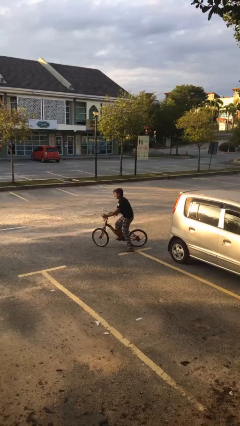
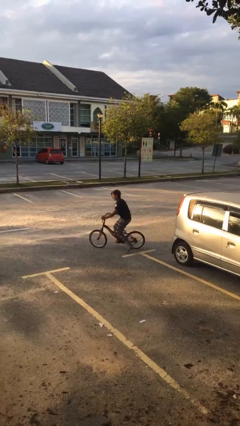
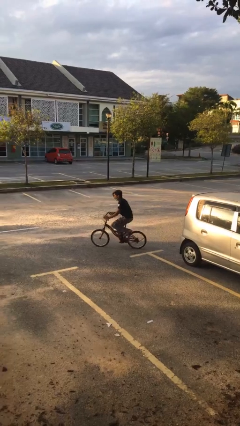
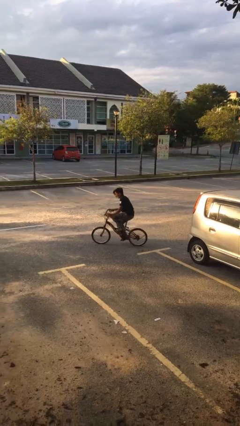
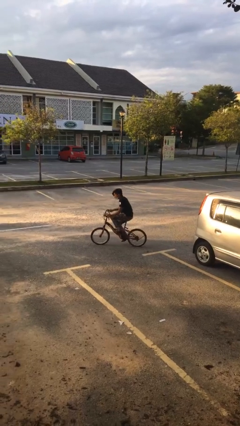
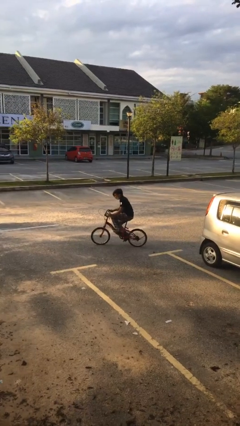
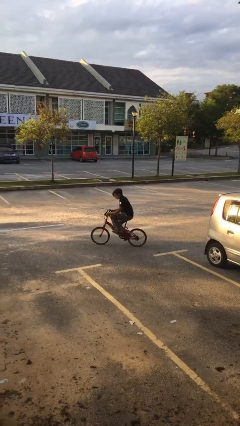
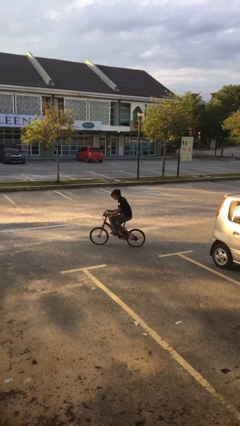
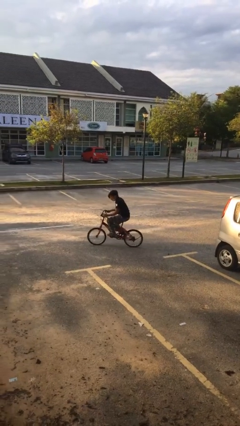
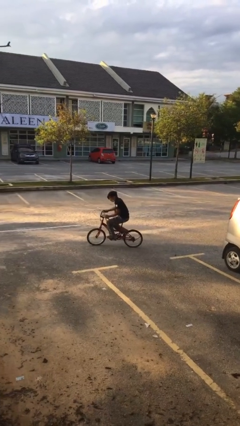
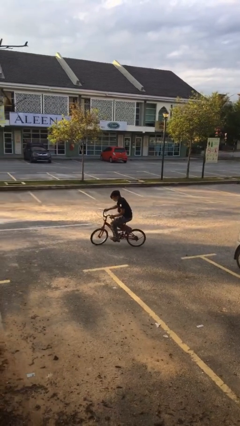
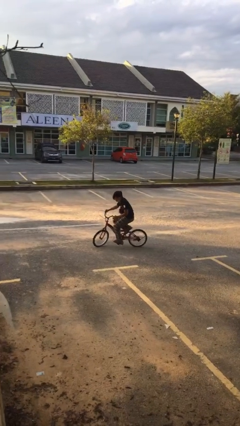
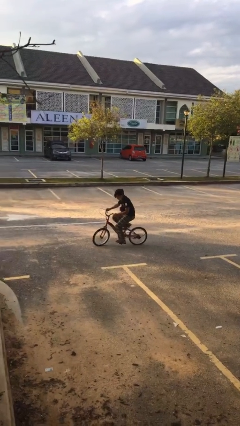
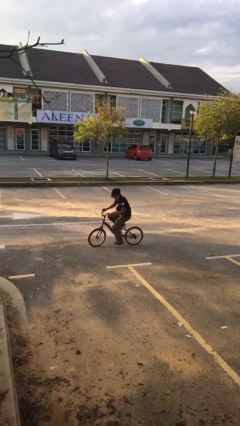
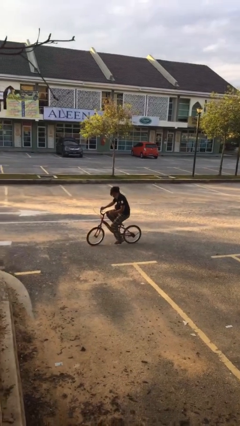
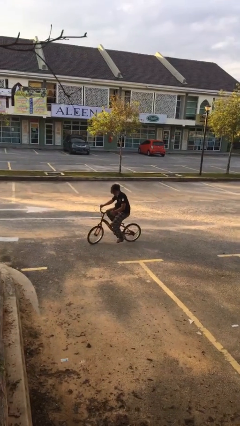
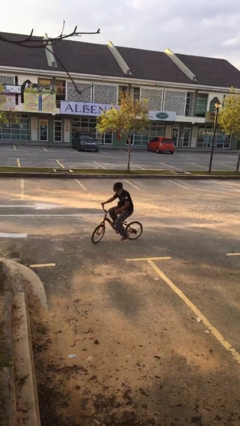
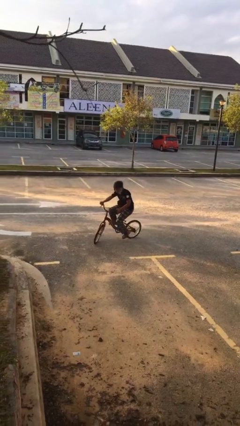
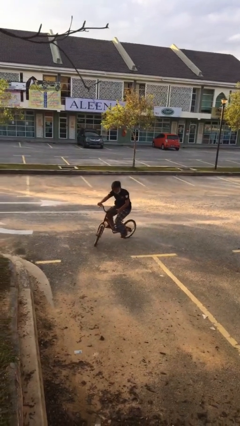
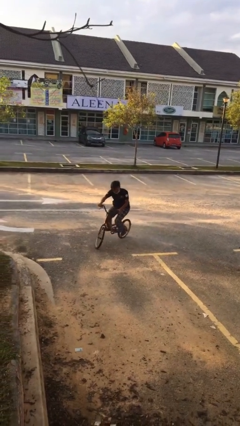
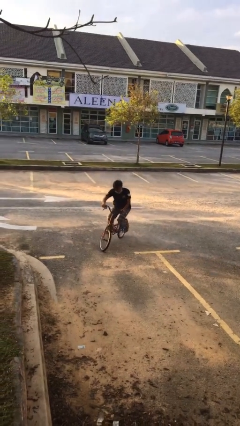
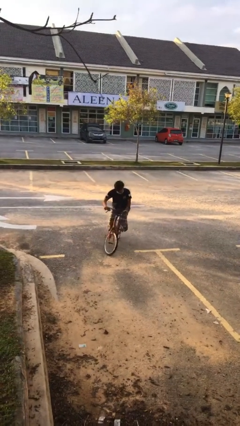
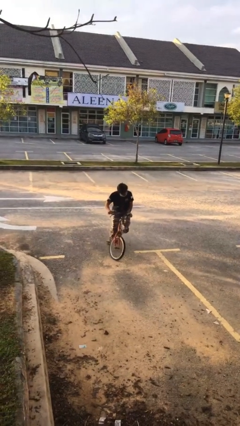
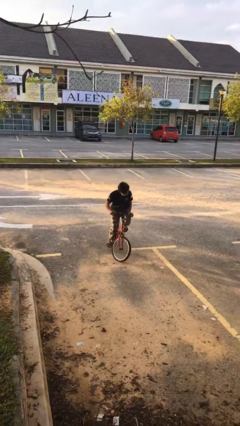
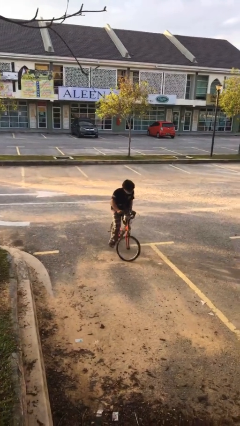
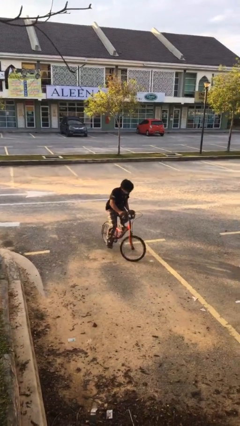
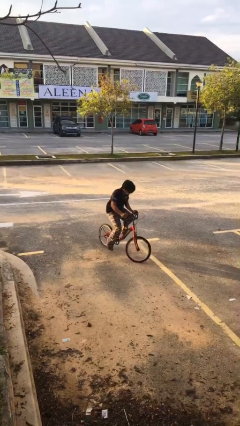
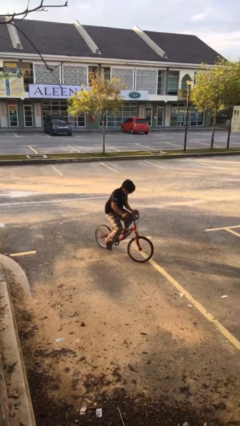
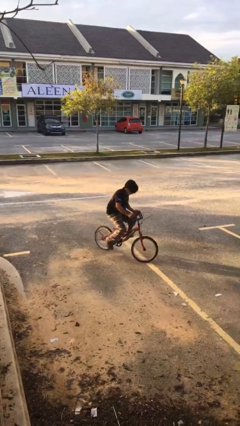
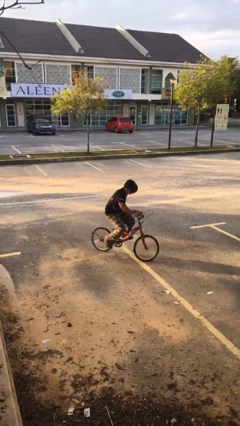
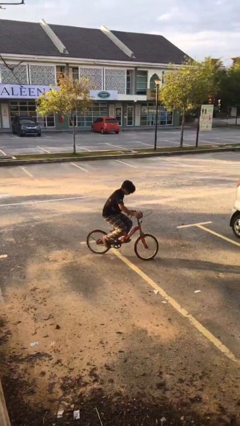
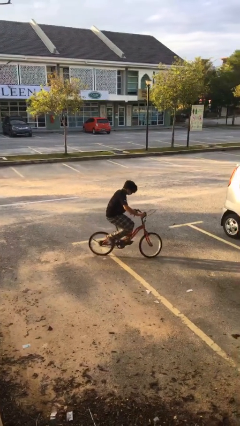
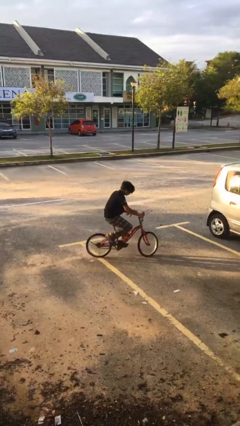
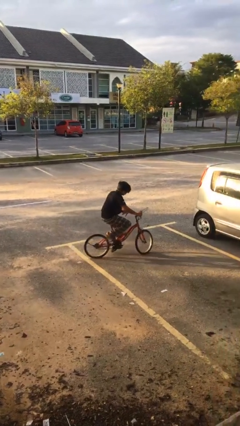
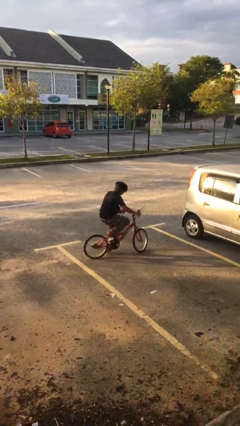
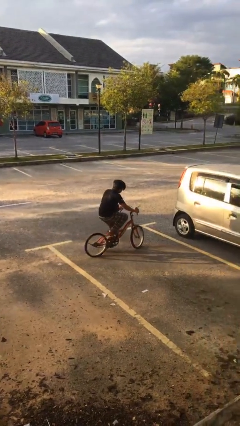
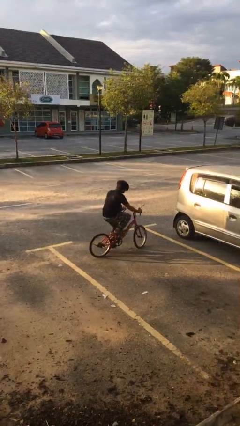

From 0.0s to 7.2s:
person rides bicycle

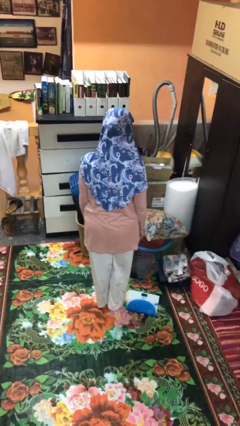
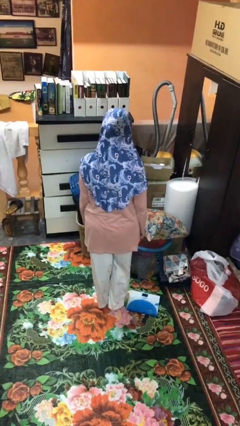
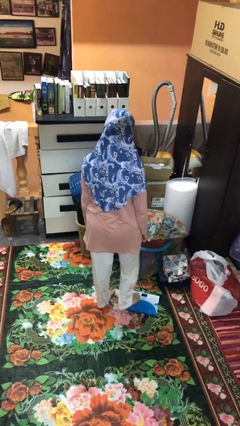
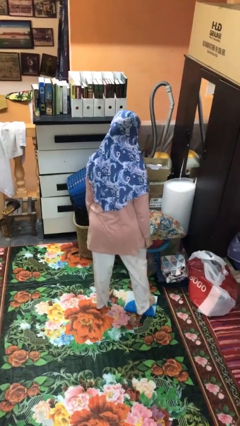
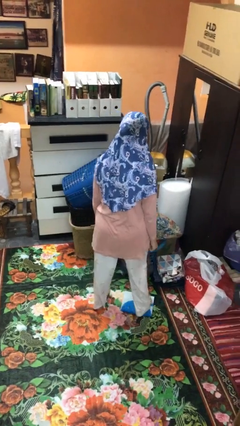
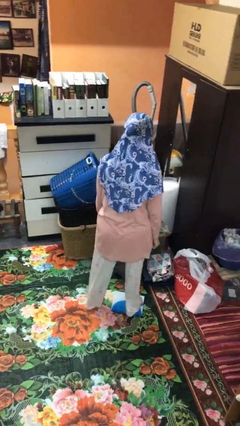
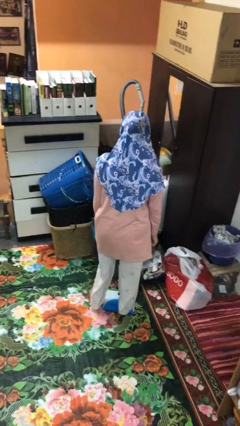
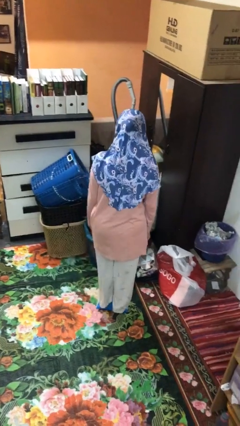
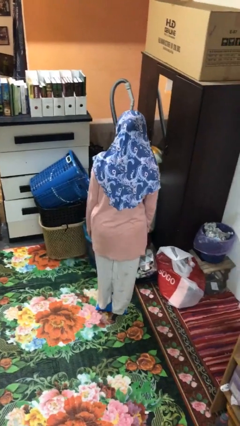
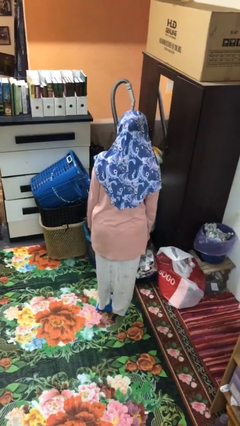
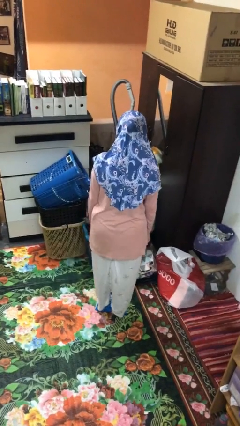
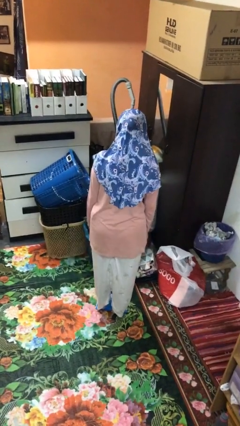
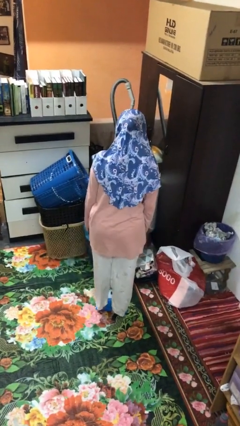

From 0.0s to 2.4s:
person uses bodyweight scale

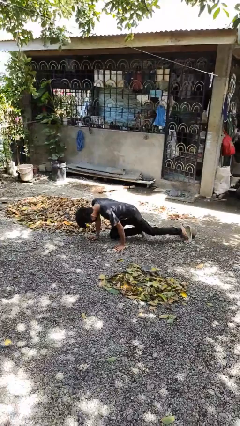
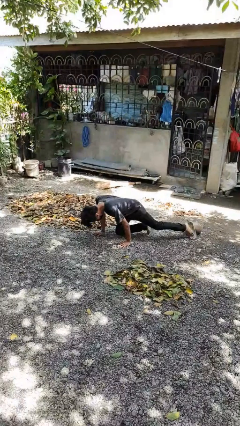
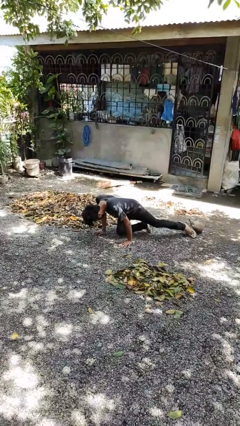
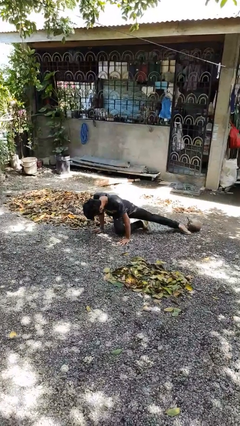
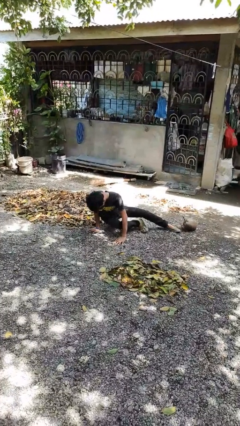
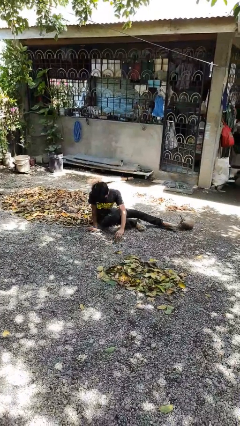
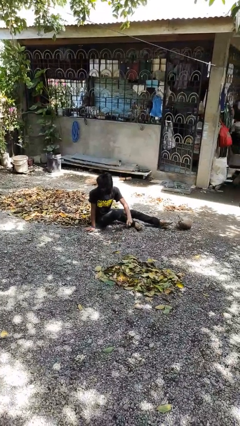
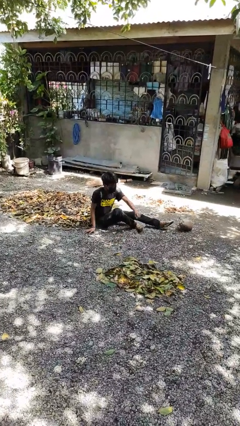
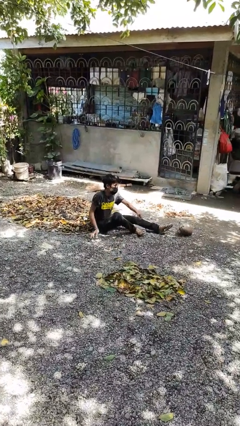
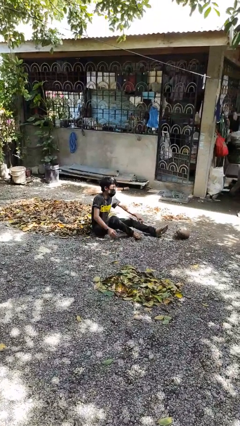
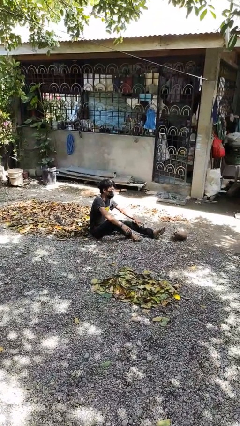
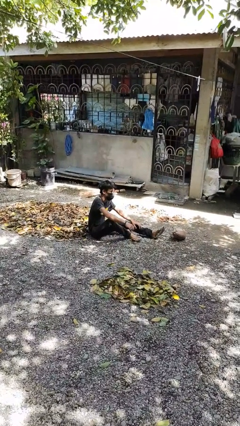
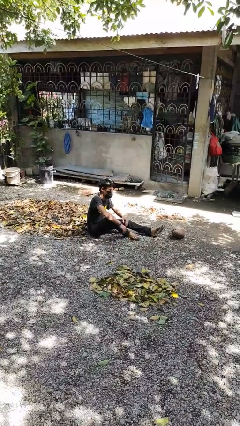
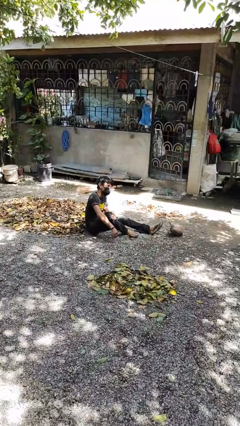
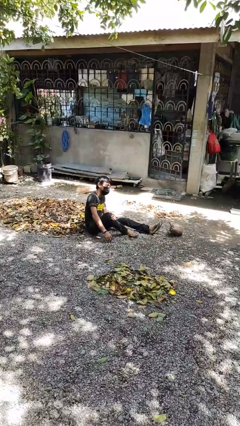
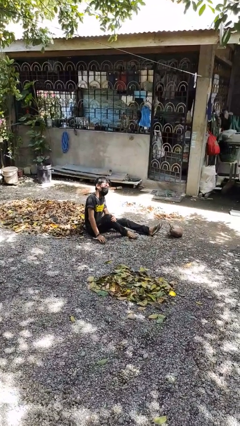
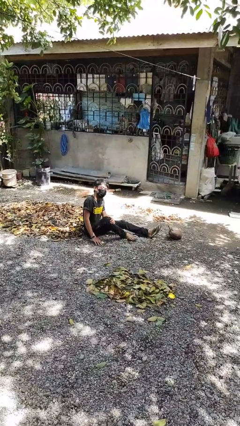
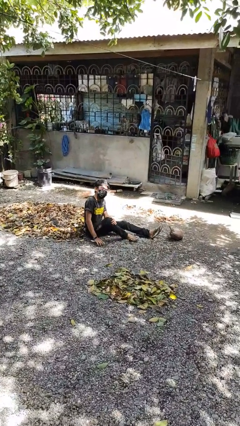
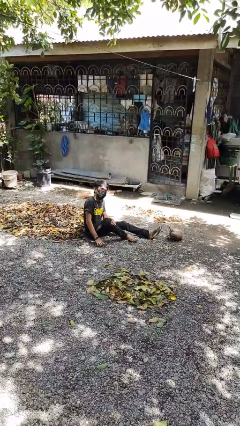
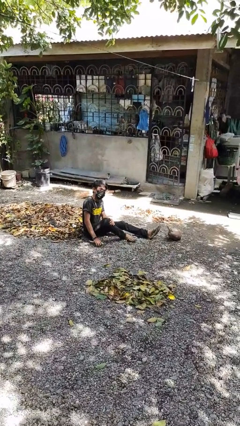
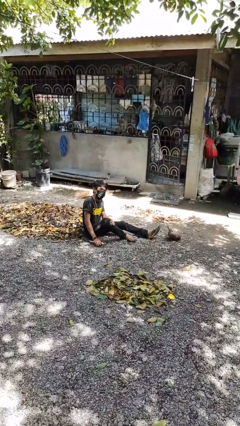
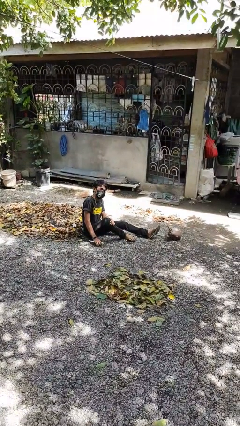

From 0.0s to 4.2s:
person lies down on floor

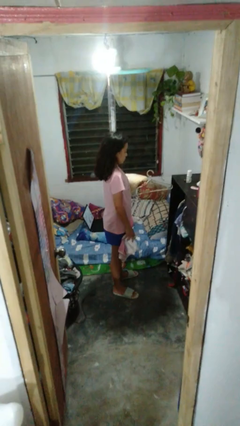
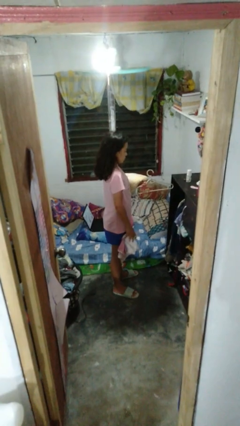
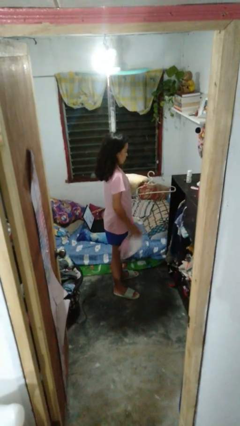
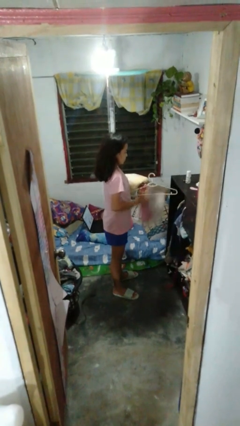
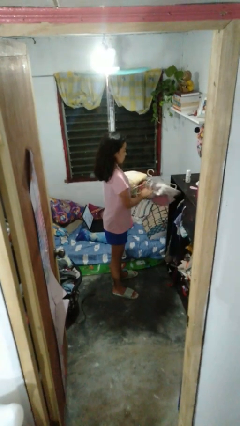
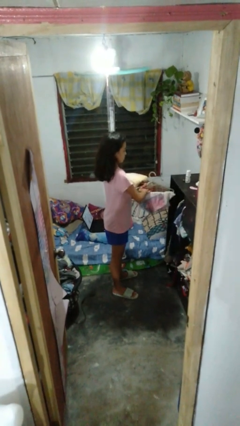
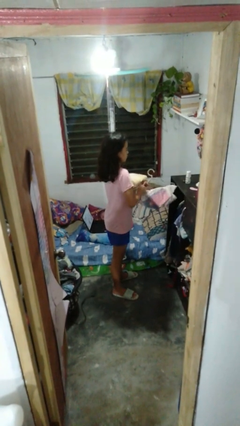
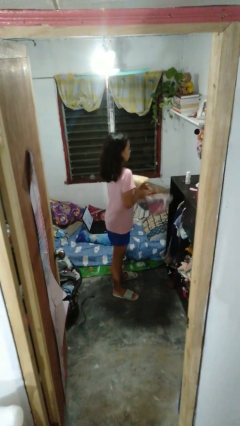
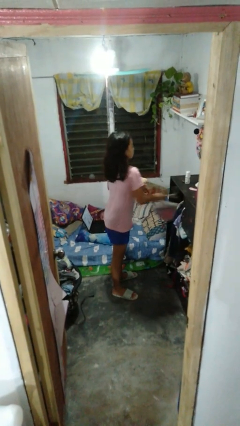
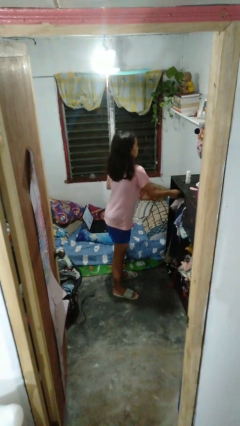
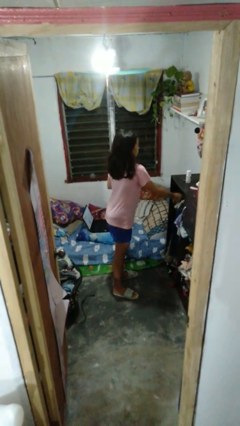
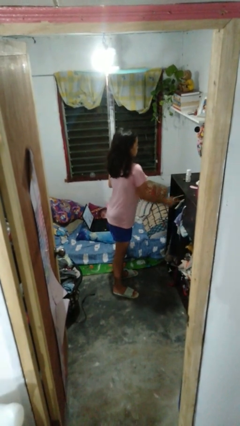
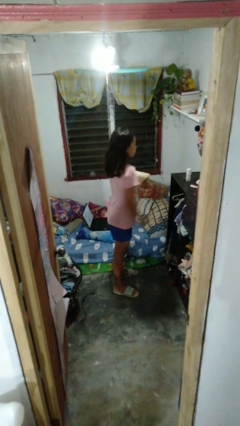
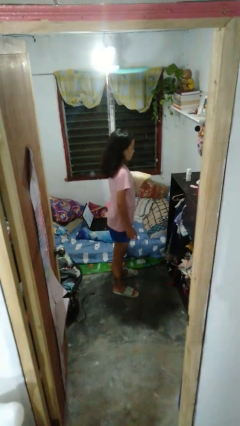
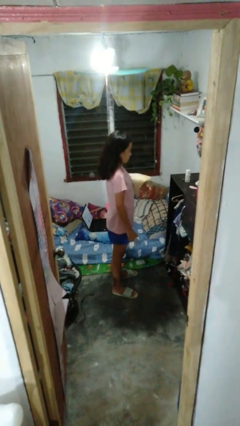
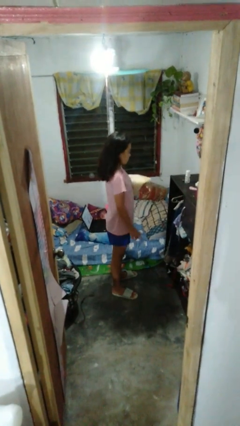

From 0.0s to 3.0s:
person puts clothes into closet

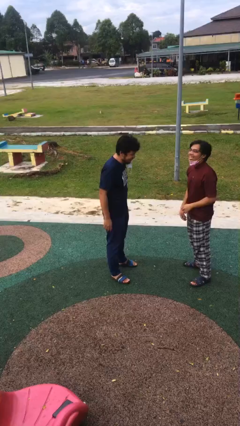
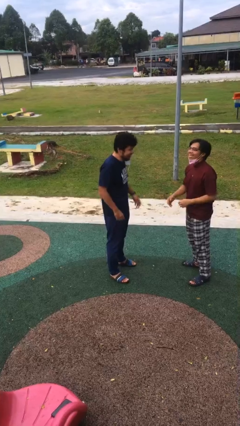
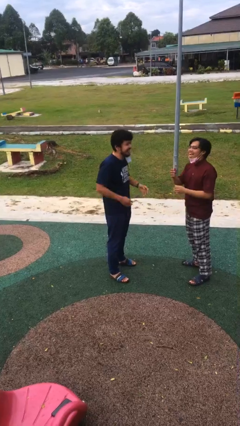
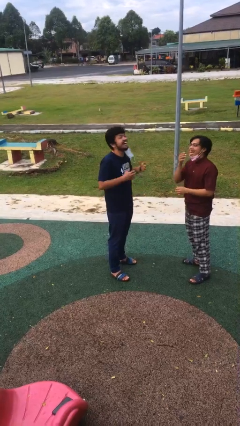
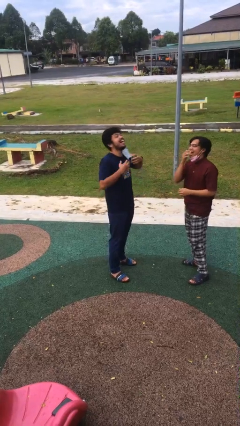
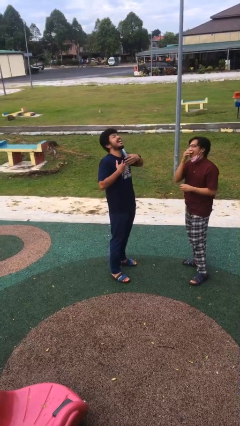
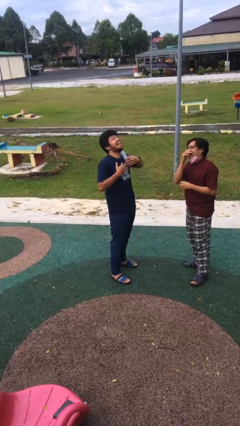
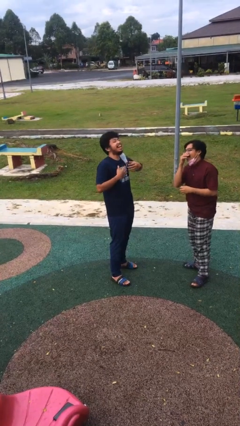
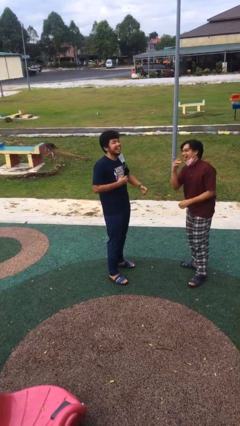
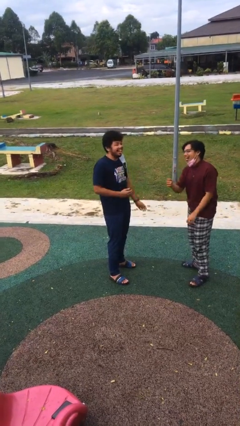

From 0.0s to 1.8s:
person laughs with person
